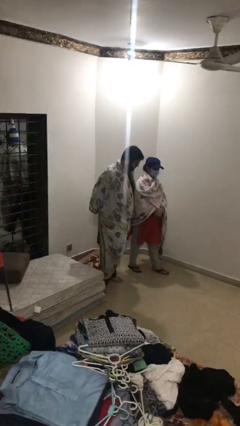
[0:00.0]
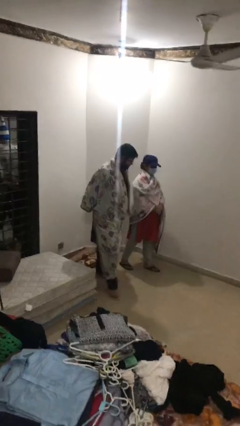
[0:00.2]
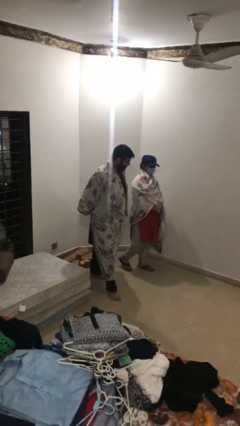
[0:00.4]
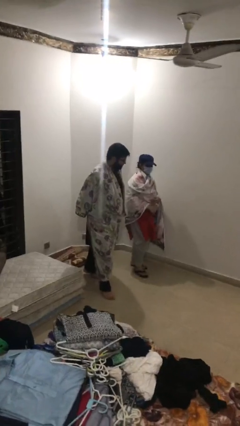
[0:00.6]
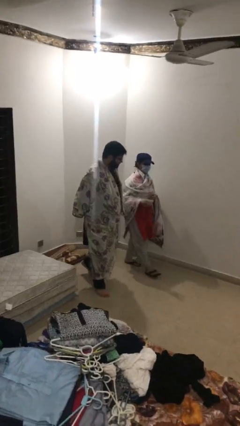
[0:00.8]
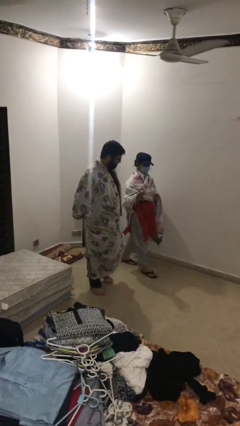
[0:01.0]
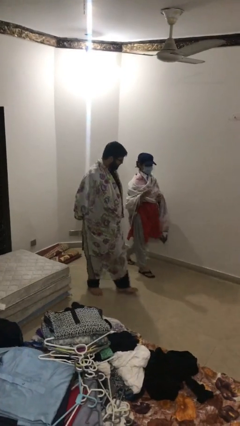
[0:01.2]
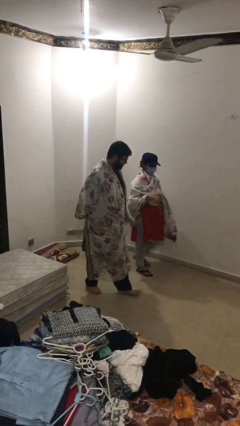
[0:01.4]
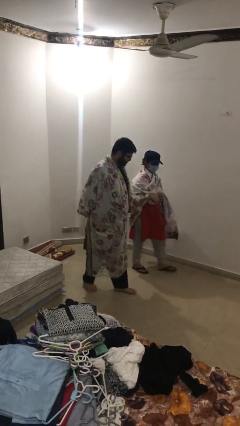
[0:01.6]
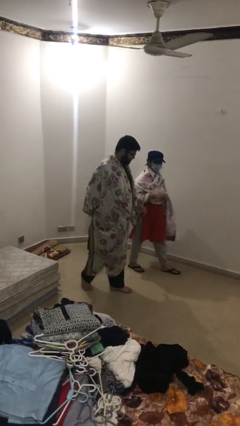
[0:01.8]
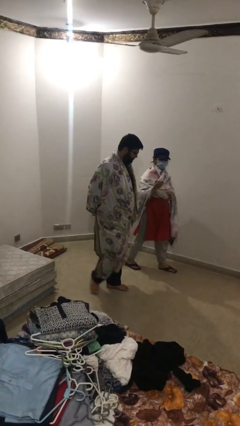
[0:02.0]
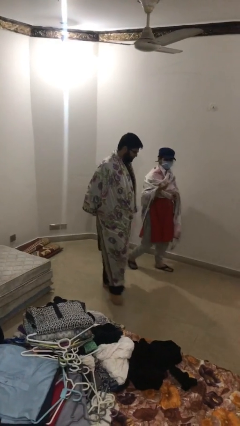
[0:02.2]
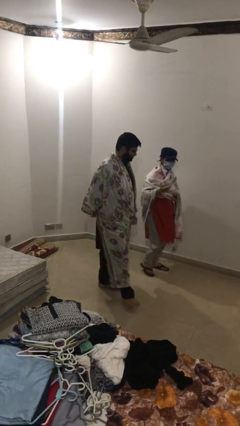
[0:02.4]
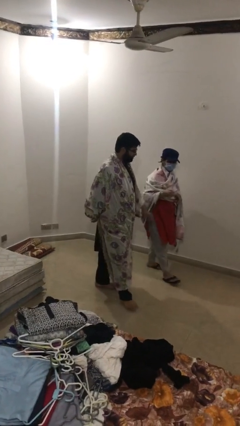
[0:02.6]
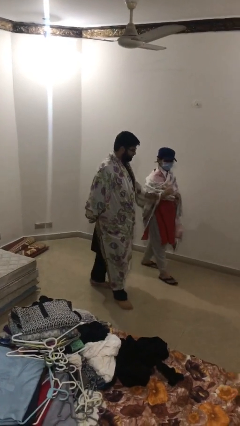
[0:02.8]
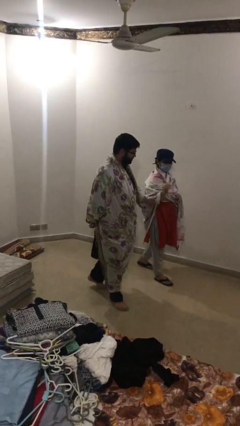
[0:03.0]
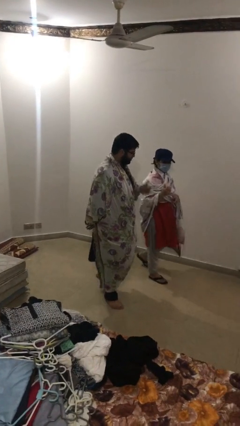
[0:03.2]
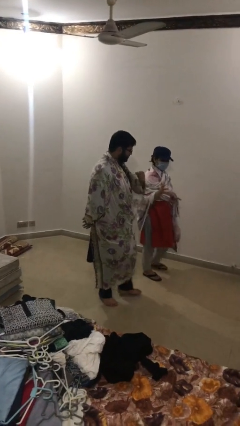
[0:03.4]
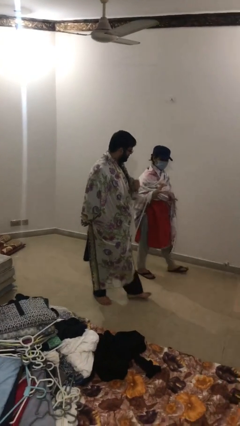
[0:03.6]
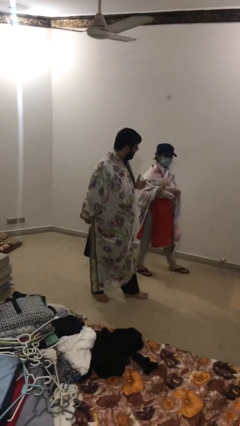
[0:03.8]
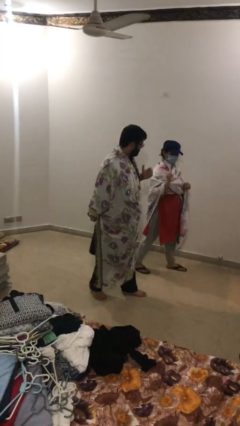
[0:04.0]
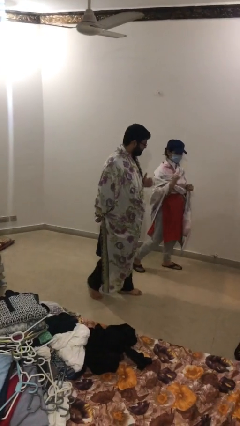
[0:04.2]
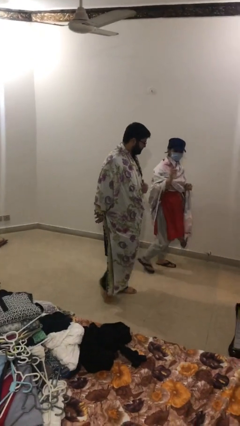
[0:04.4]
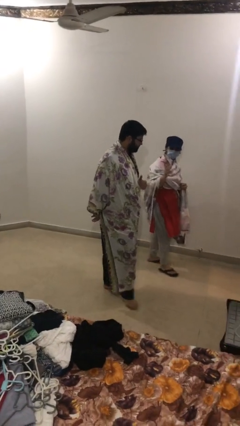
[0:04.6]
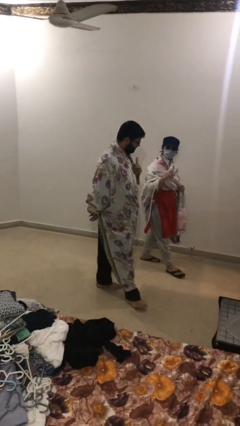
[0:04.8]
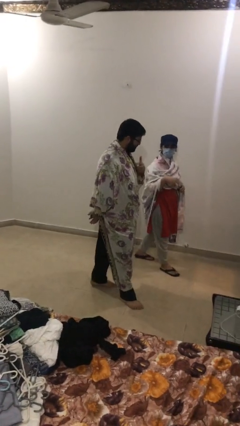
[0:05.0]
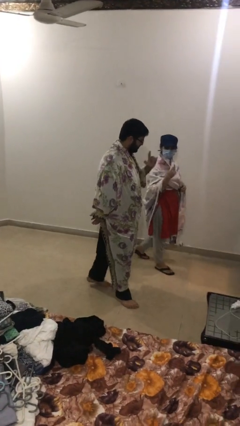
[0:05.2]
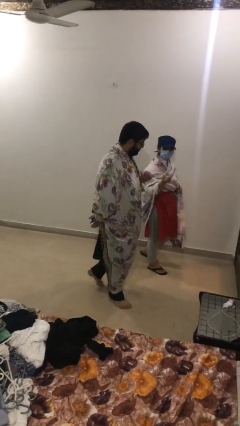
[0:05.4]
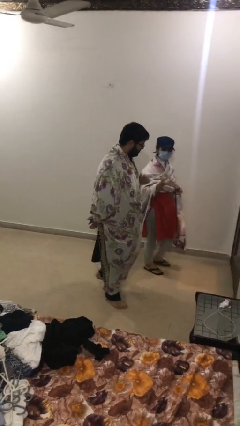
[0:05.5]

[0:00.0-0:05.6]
person talks to person

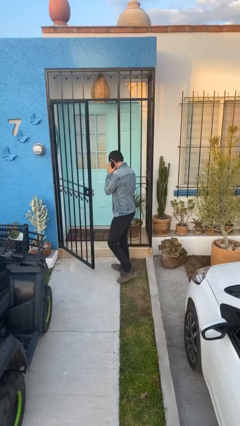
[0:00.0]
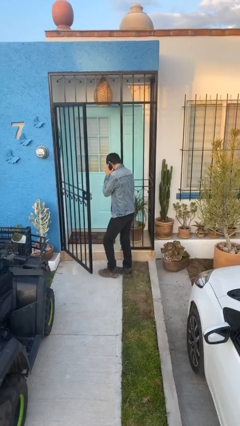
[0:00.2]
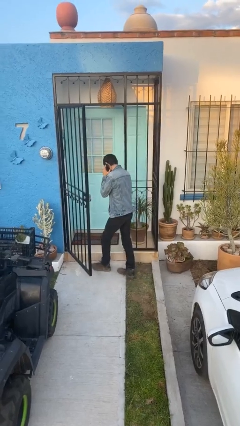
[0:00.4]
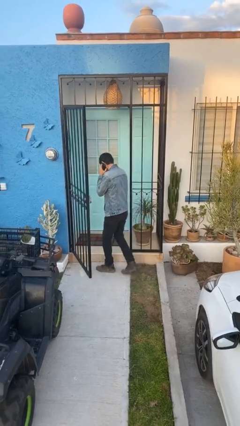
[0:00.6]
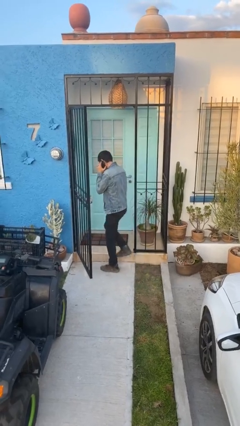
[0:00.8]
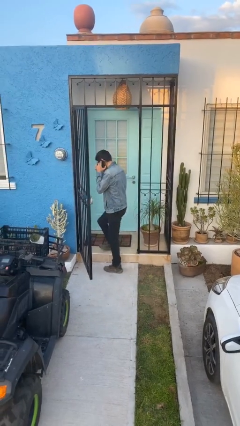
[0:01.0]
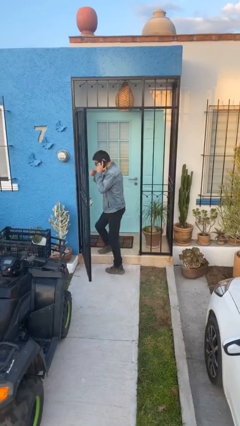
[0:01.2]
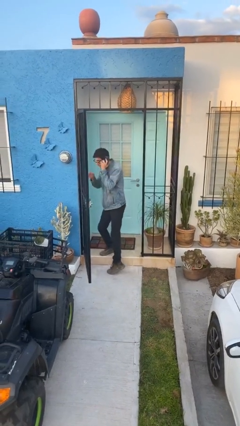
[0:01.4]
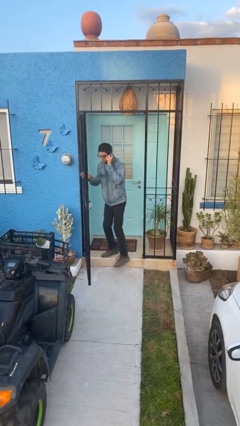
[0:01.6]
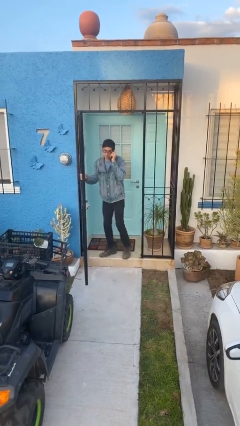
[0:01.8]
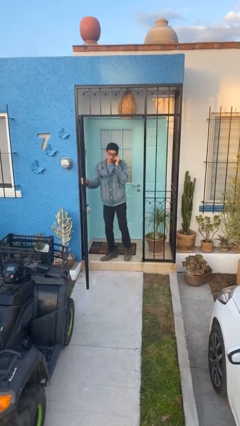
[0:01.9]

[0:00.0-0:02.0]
person exits scene through structure

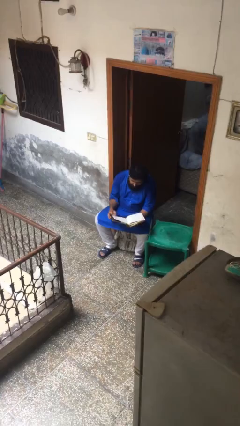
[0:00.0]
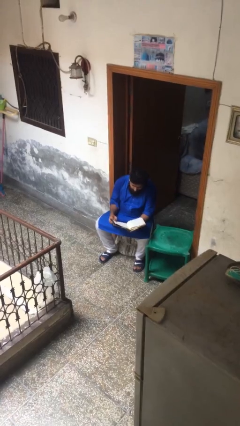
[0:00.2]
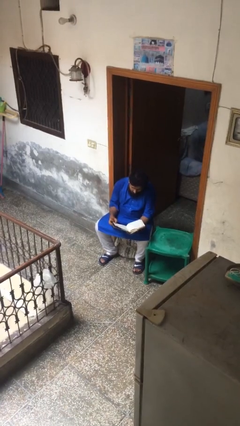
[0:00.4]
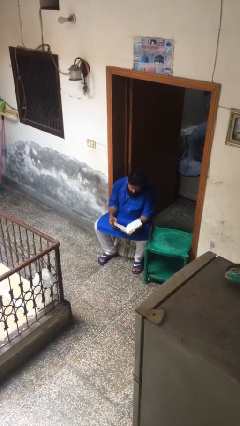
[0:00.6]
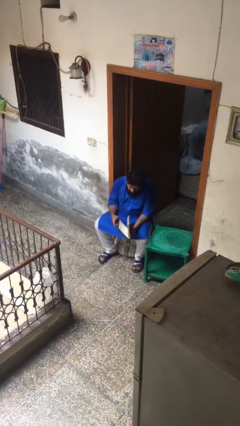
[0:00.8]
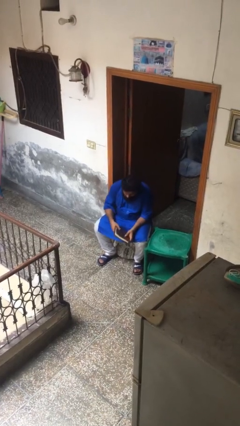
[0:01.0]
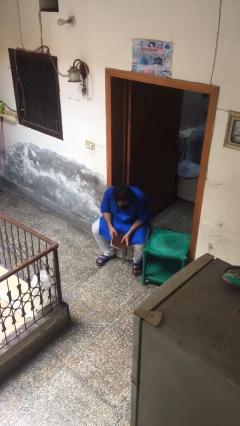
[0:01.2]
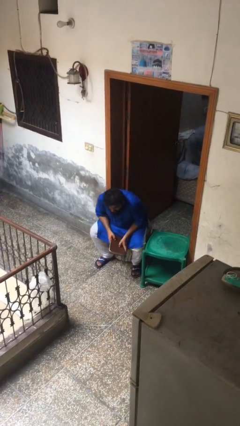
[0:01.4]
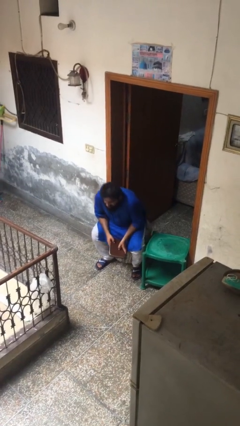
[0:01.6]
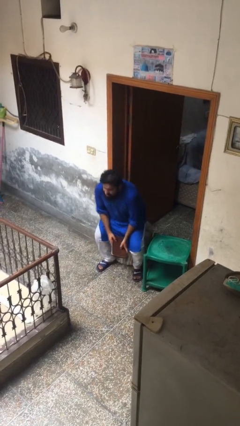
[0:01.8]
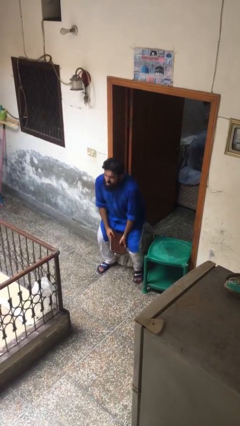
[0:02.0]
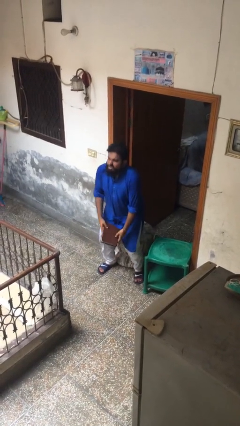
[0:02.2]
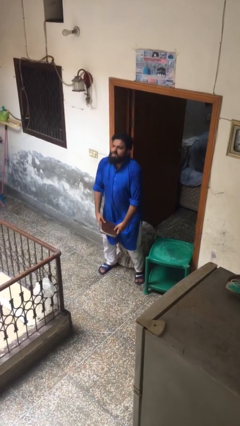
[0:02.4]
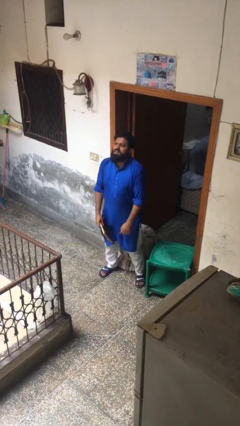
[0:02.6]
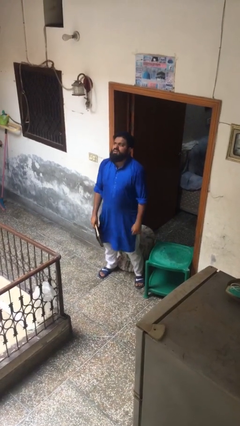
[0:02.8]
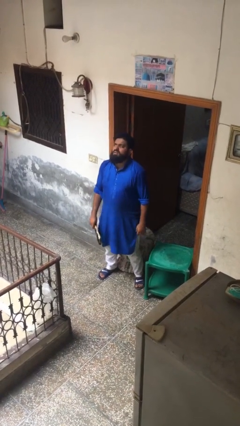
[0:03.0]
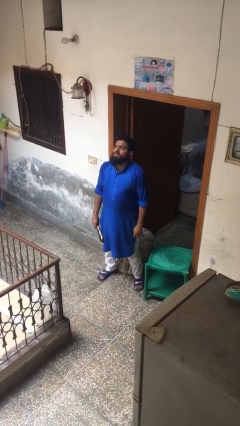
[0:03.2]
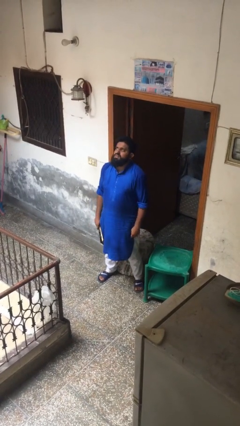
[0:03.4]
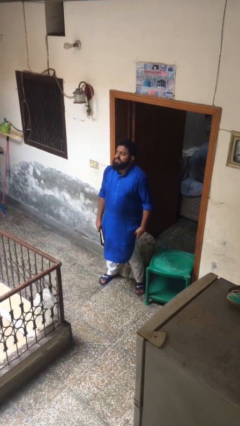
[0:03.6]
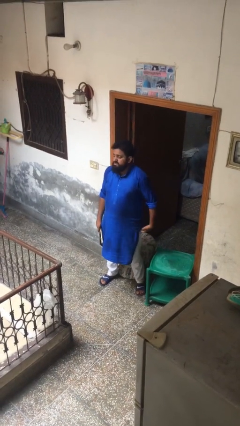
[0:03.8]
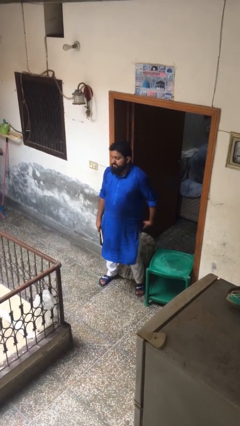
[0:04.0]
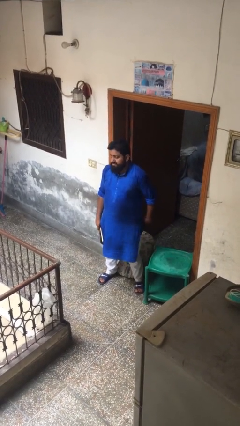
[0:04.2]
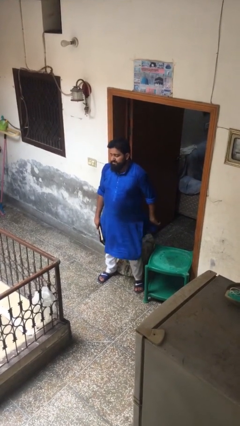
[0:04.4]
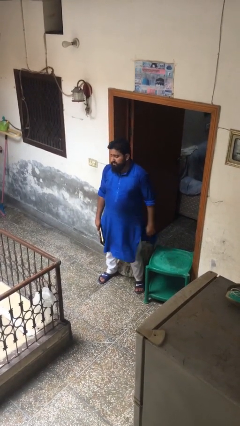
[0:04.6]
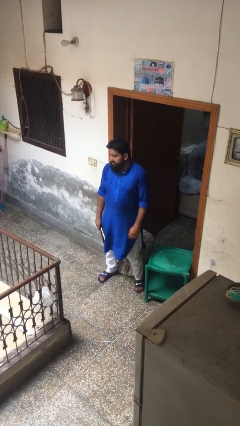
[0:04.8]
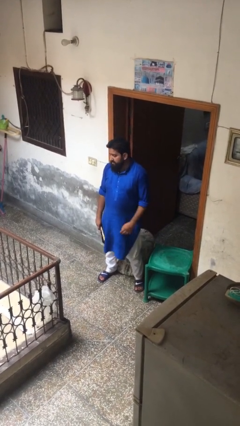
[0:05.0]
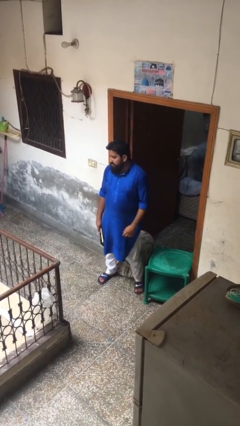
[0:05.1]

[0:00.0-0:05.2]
person stands up

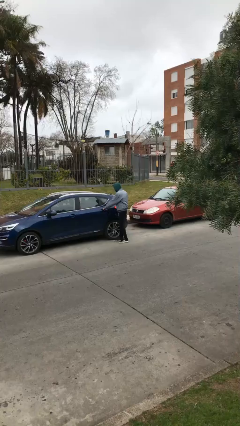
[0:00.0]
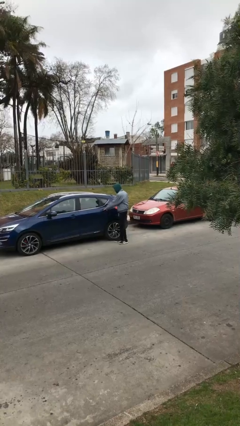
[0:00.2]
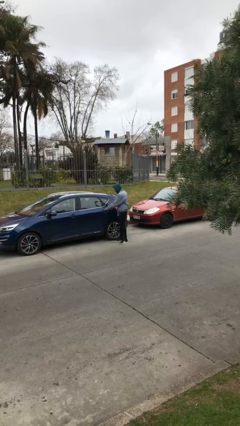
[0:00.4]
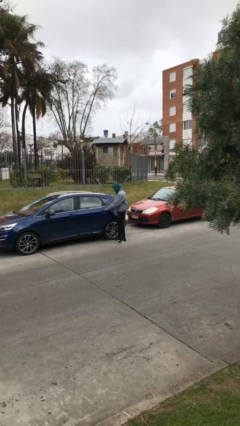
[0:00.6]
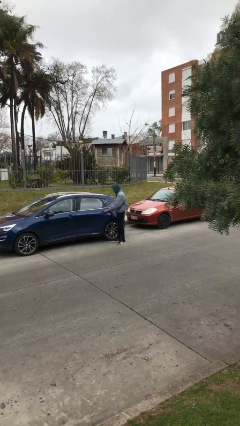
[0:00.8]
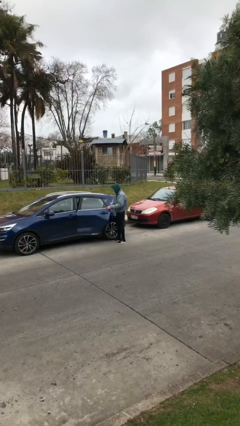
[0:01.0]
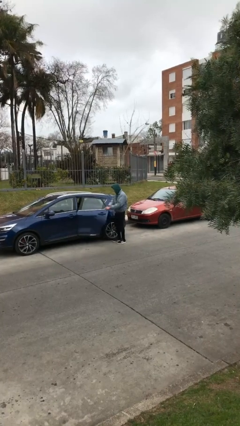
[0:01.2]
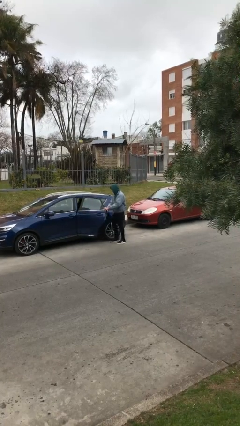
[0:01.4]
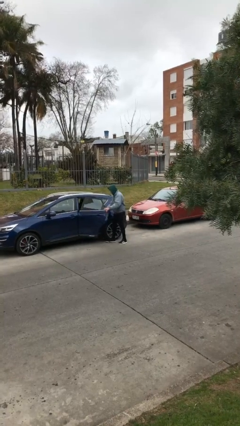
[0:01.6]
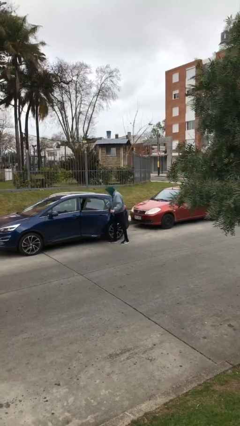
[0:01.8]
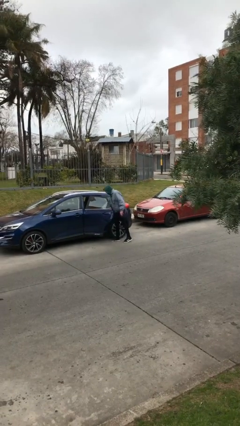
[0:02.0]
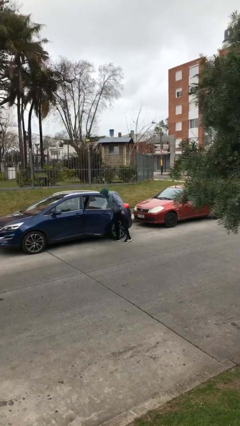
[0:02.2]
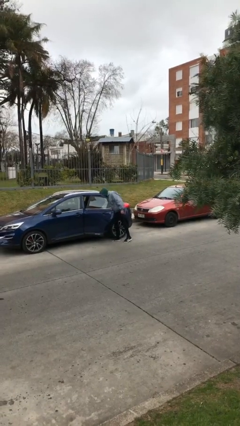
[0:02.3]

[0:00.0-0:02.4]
person opens car door

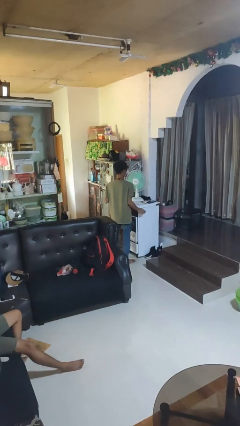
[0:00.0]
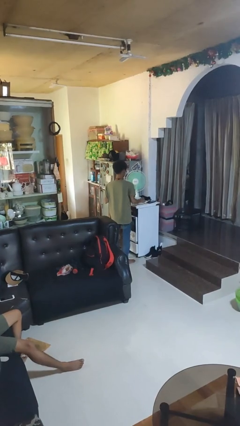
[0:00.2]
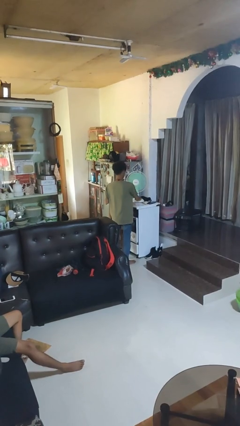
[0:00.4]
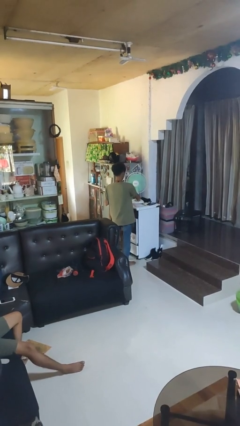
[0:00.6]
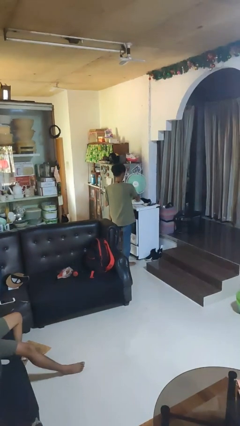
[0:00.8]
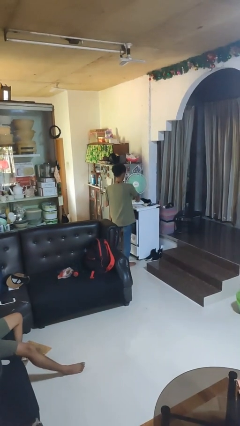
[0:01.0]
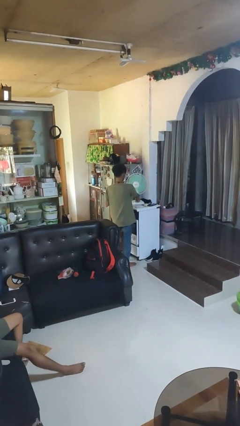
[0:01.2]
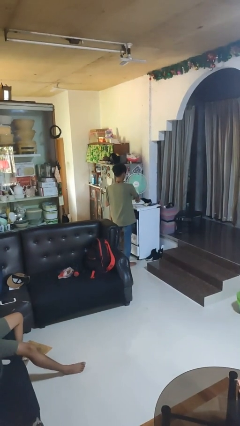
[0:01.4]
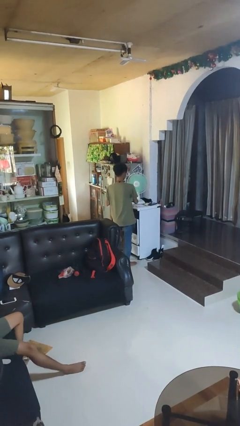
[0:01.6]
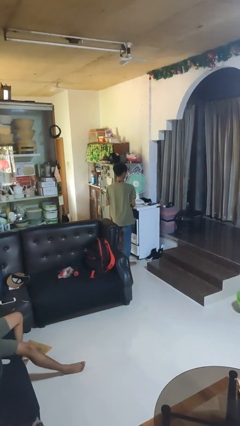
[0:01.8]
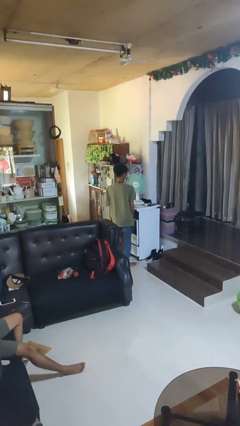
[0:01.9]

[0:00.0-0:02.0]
person turns off fan
